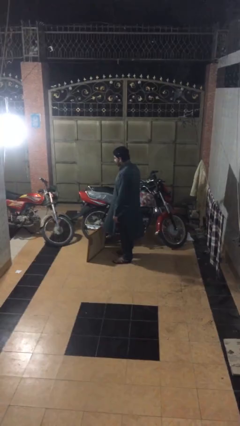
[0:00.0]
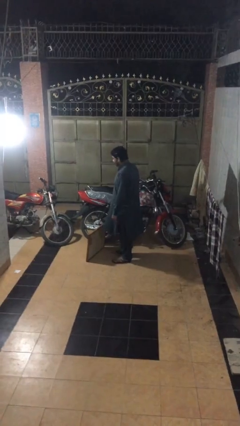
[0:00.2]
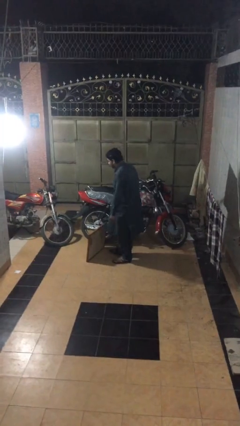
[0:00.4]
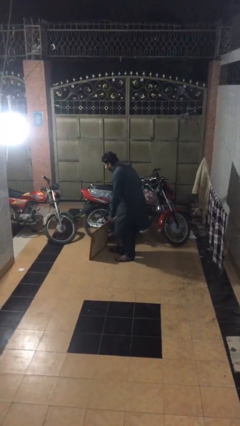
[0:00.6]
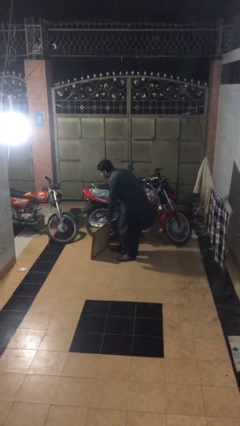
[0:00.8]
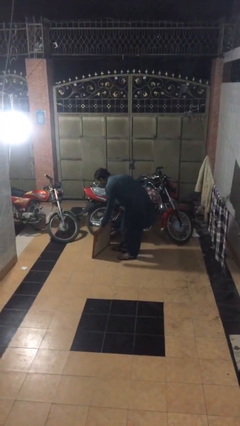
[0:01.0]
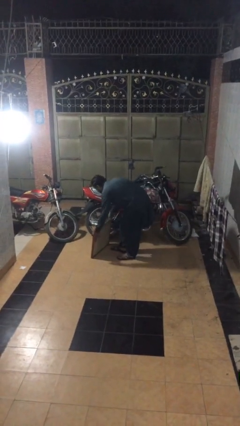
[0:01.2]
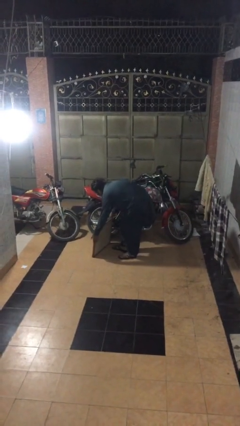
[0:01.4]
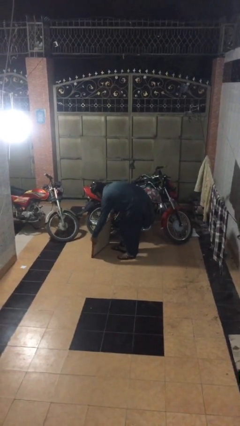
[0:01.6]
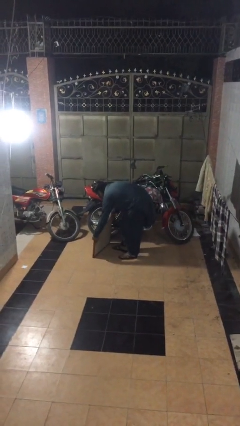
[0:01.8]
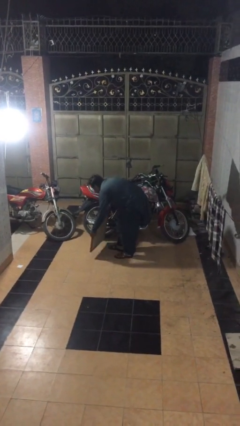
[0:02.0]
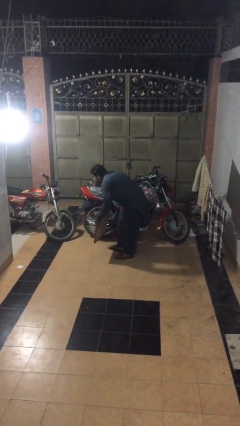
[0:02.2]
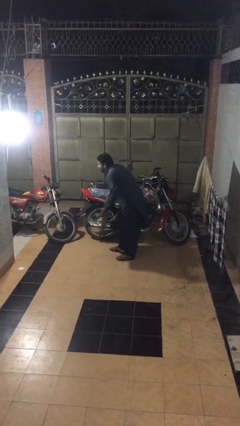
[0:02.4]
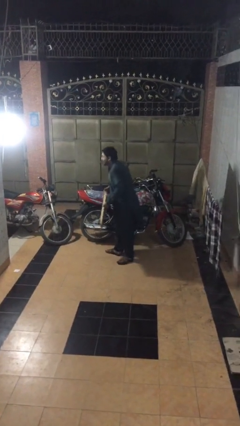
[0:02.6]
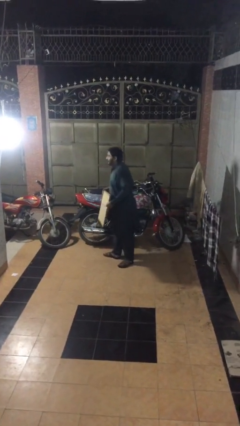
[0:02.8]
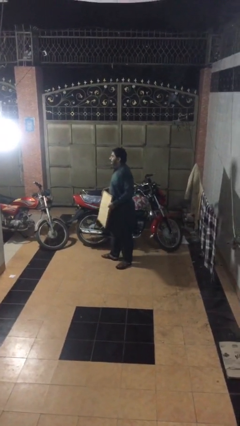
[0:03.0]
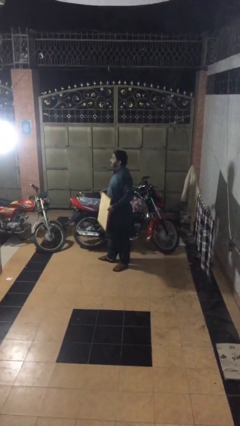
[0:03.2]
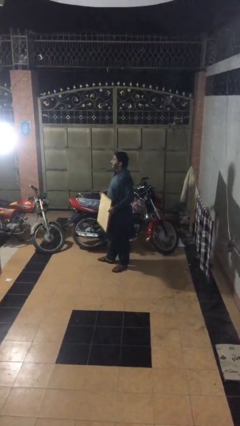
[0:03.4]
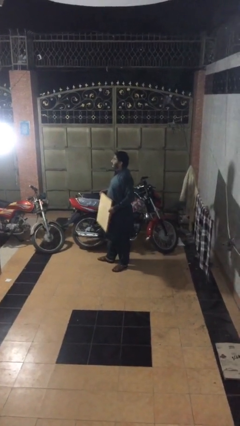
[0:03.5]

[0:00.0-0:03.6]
person picks up object from floor

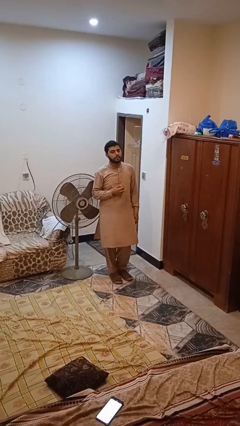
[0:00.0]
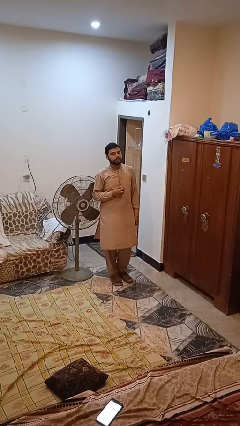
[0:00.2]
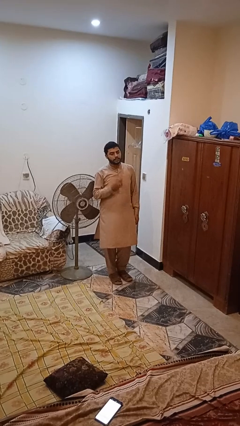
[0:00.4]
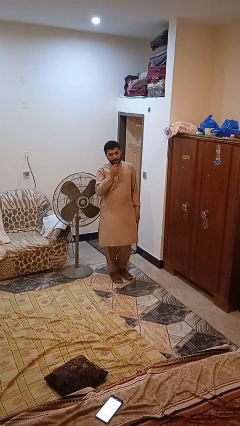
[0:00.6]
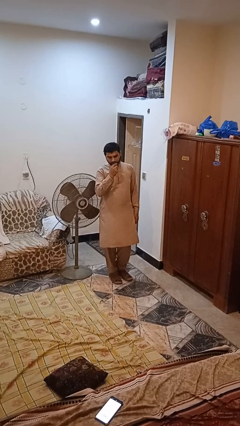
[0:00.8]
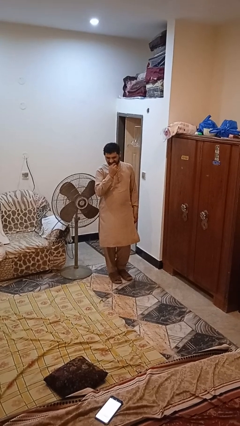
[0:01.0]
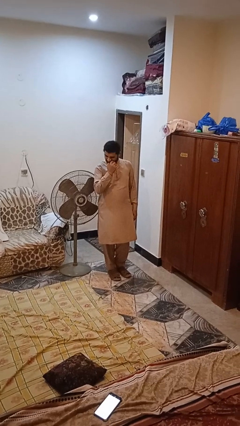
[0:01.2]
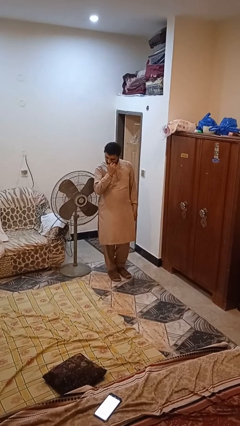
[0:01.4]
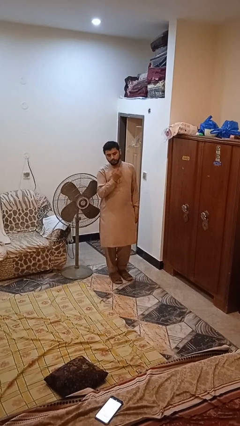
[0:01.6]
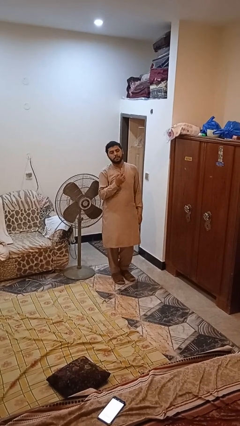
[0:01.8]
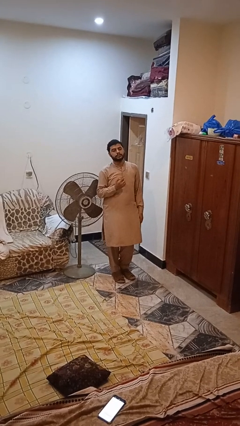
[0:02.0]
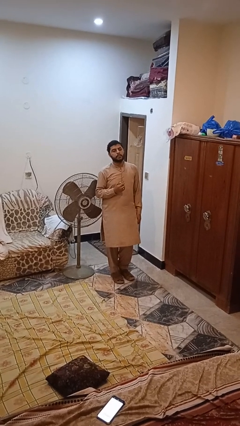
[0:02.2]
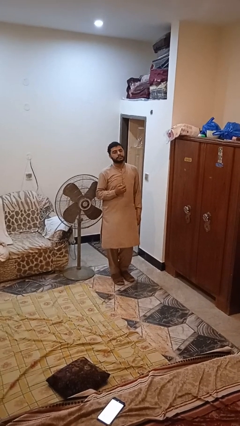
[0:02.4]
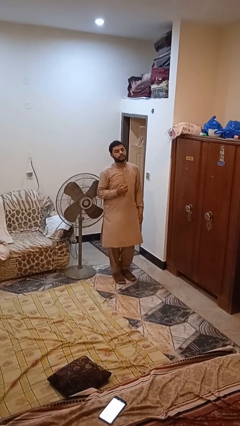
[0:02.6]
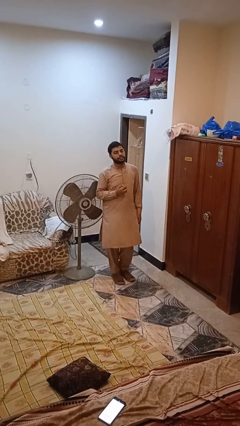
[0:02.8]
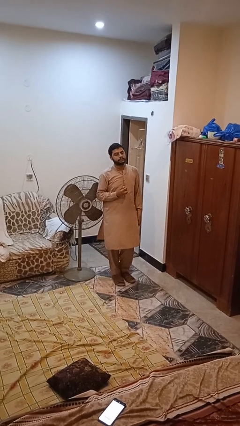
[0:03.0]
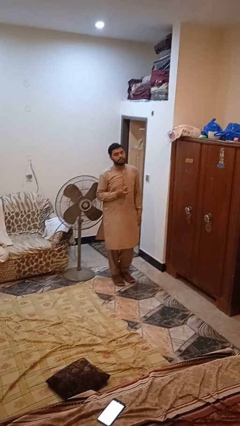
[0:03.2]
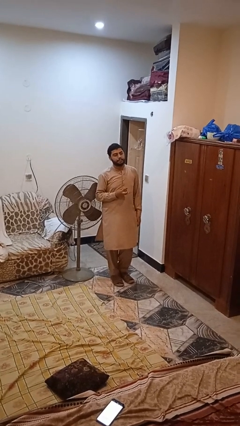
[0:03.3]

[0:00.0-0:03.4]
person eats apple

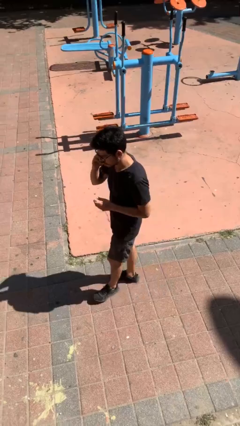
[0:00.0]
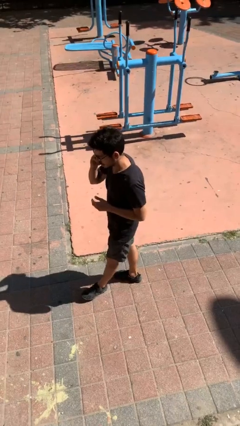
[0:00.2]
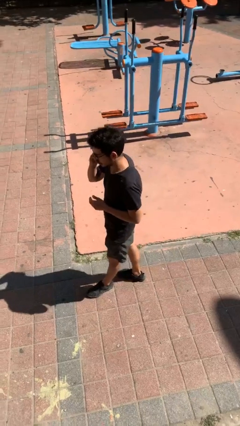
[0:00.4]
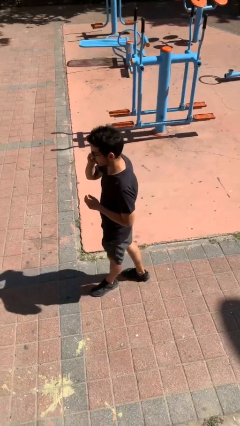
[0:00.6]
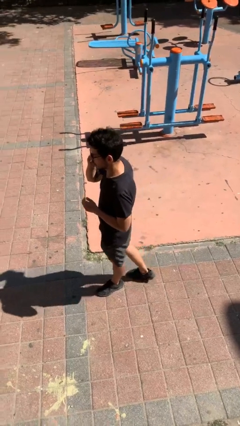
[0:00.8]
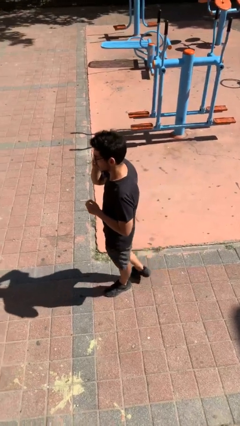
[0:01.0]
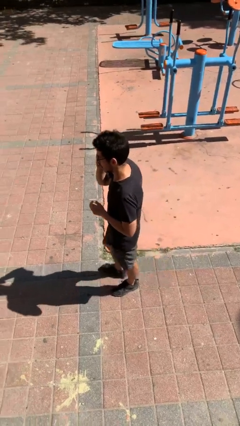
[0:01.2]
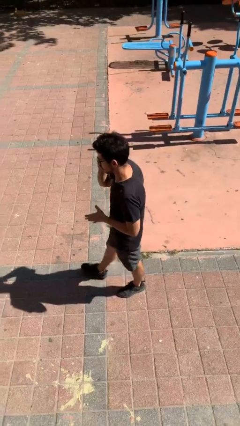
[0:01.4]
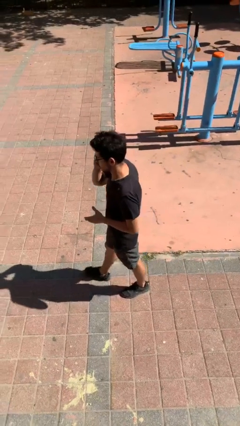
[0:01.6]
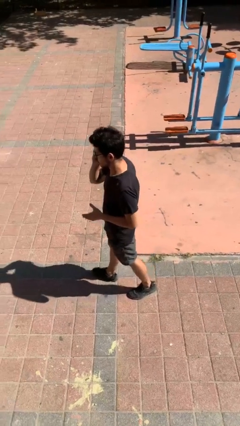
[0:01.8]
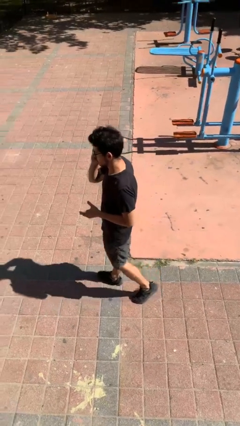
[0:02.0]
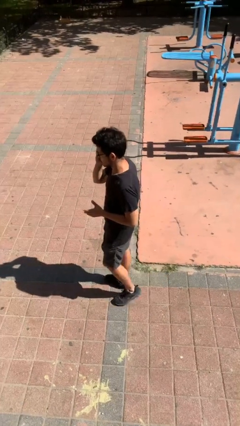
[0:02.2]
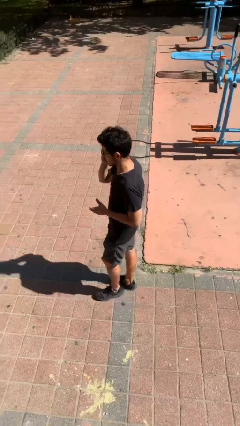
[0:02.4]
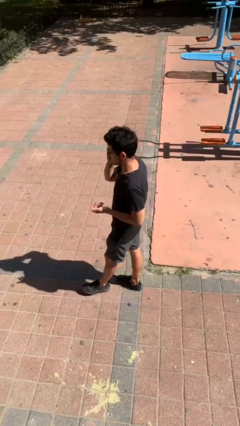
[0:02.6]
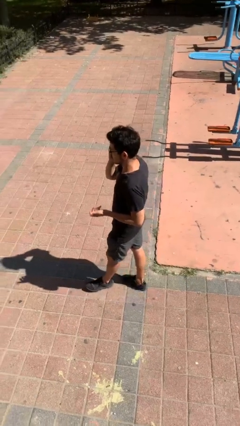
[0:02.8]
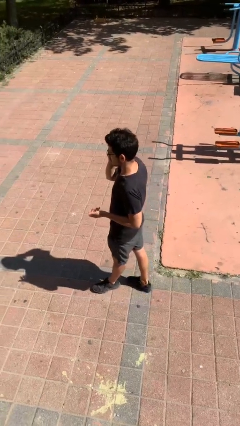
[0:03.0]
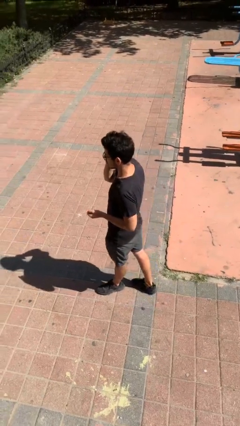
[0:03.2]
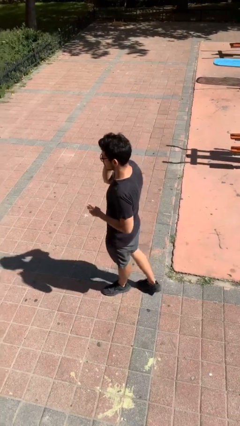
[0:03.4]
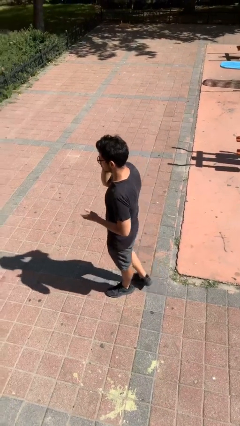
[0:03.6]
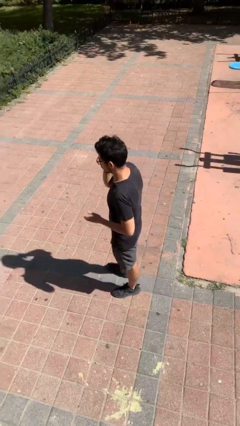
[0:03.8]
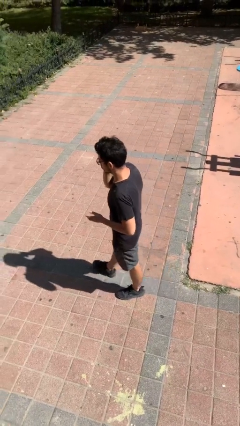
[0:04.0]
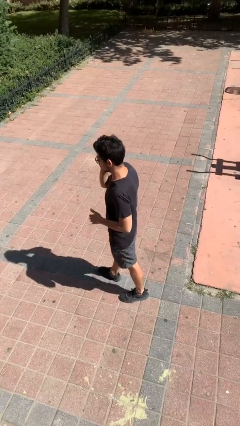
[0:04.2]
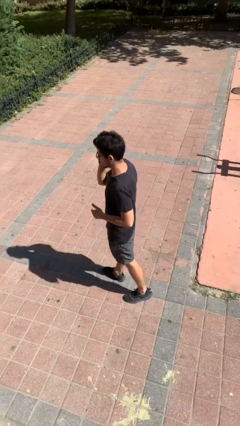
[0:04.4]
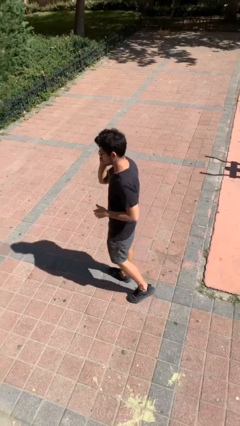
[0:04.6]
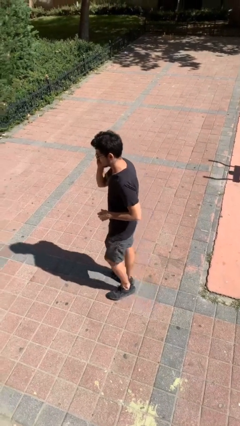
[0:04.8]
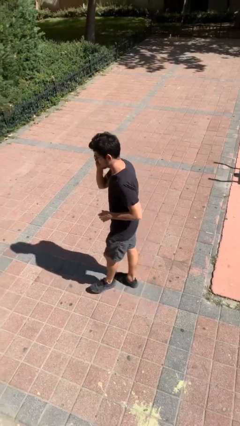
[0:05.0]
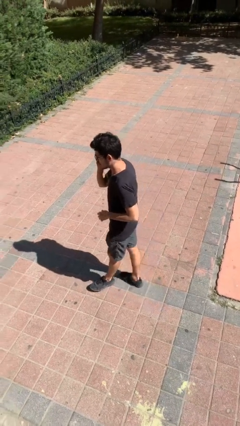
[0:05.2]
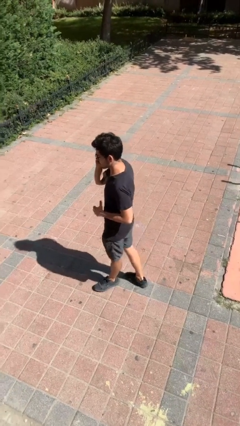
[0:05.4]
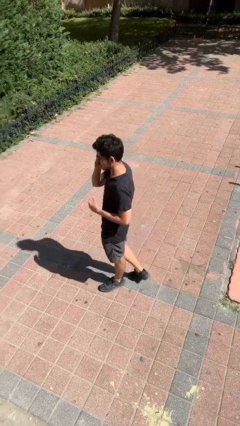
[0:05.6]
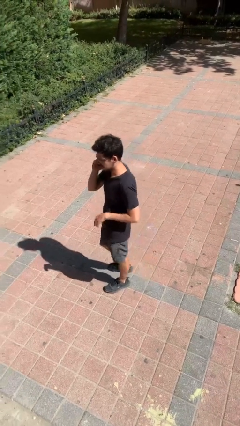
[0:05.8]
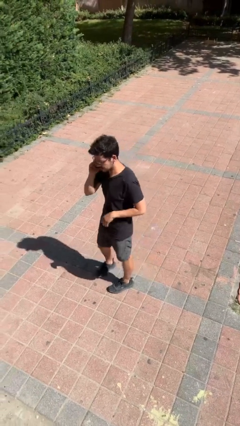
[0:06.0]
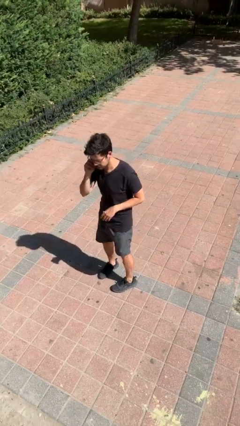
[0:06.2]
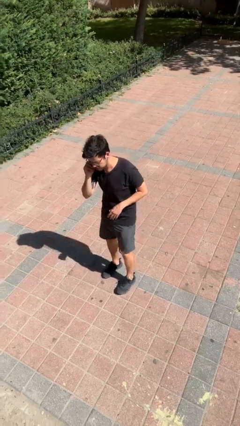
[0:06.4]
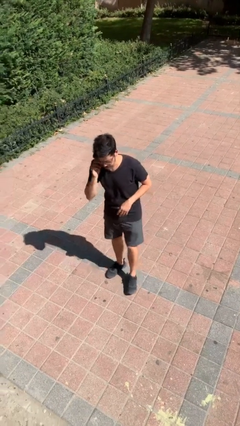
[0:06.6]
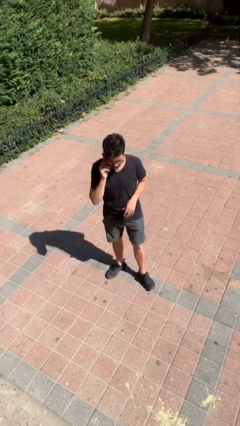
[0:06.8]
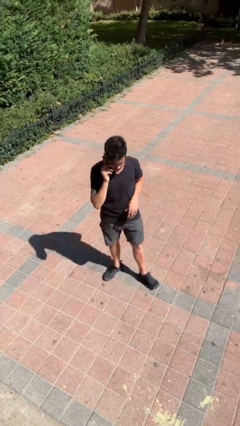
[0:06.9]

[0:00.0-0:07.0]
person talks on phone

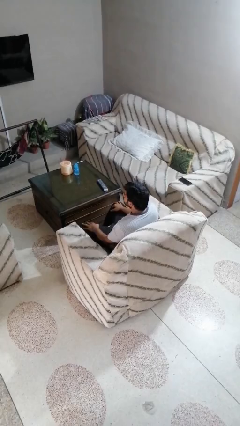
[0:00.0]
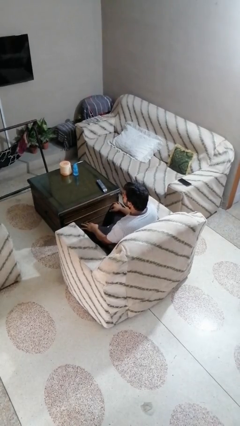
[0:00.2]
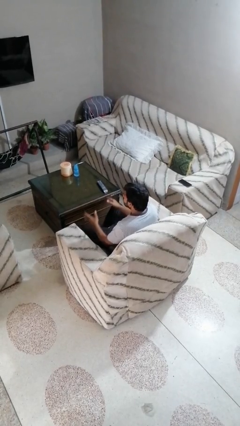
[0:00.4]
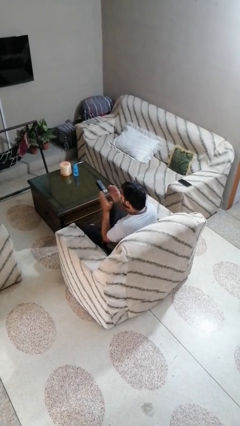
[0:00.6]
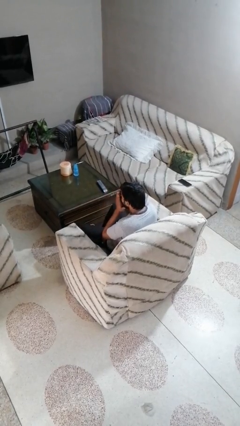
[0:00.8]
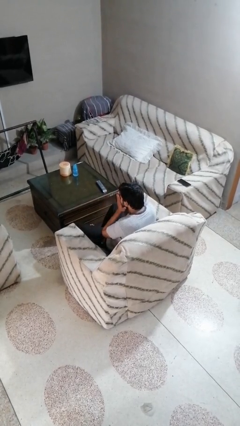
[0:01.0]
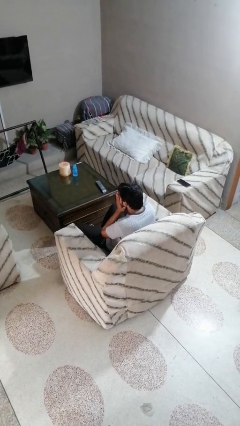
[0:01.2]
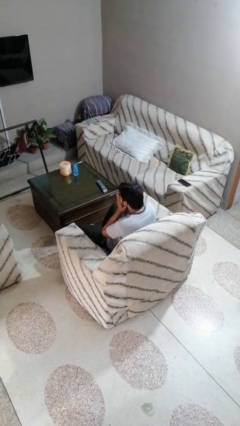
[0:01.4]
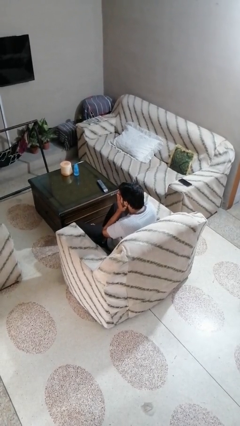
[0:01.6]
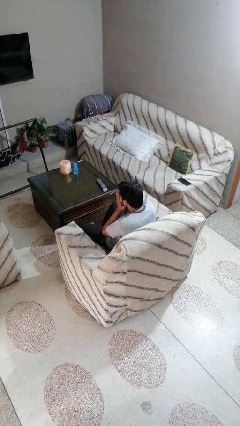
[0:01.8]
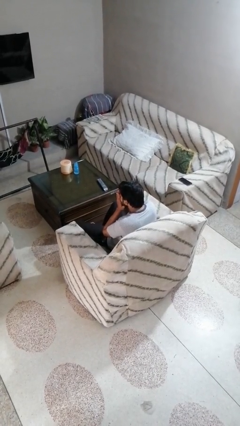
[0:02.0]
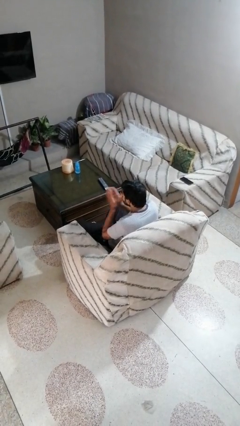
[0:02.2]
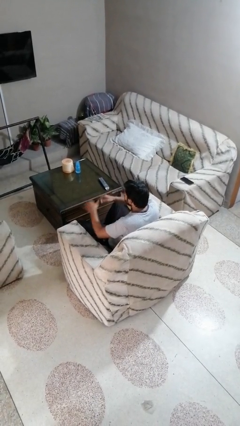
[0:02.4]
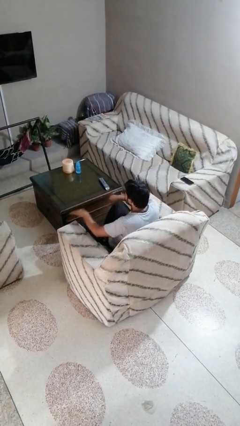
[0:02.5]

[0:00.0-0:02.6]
person covers face with hands

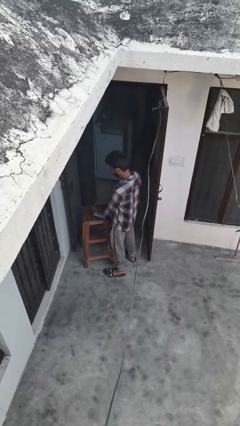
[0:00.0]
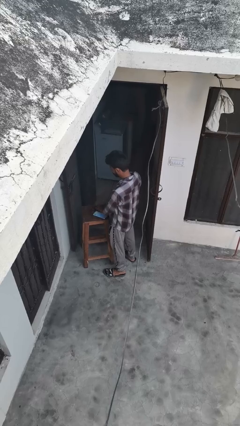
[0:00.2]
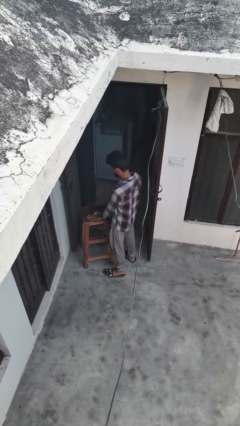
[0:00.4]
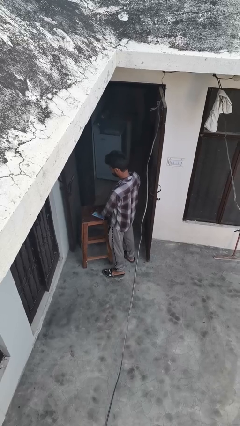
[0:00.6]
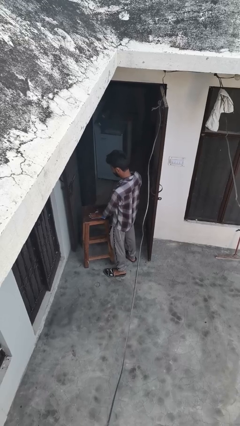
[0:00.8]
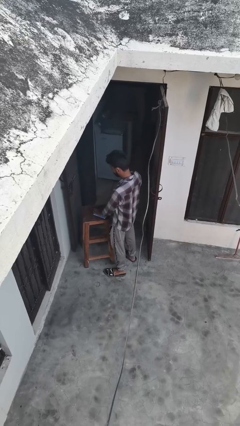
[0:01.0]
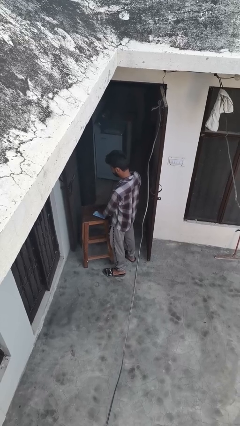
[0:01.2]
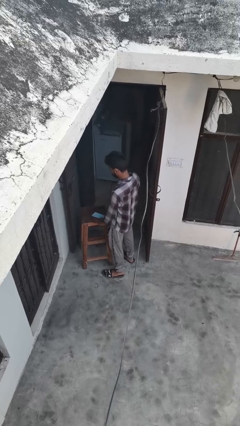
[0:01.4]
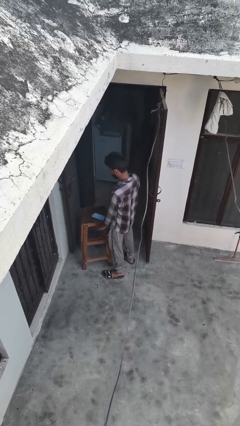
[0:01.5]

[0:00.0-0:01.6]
person waves hand over object
